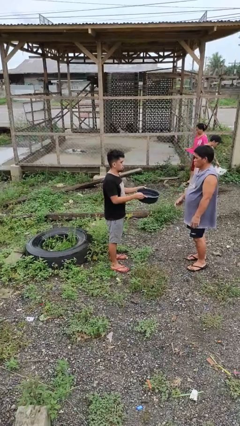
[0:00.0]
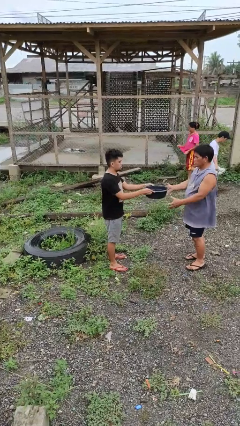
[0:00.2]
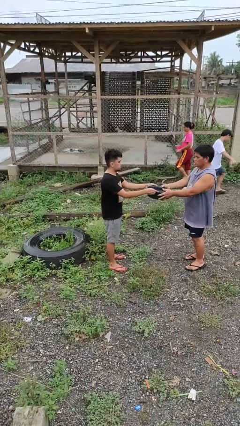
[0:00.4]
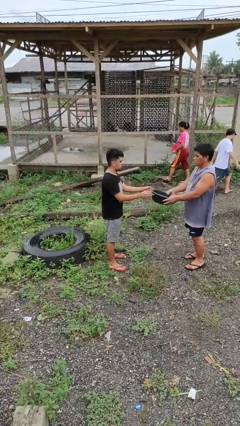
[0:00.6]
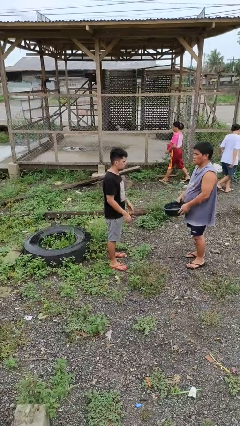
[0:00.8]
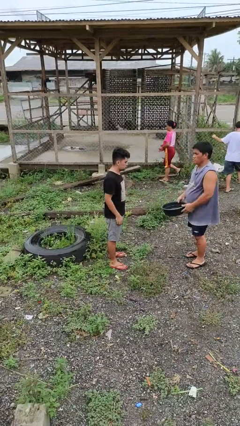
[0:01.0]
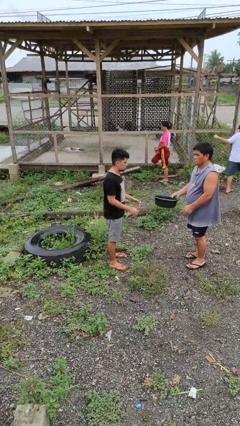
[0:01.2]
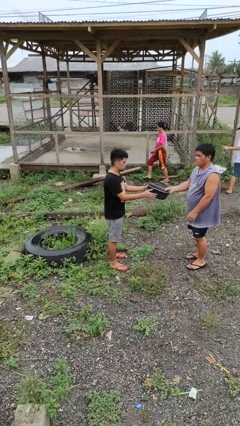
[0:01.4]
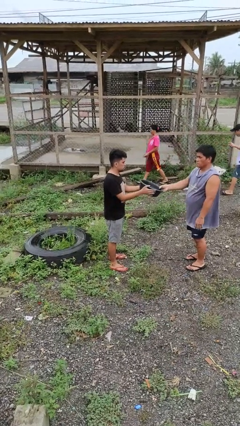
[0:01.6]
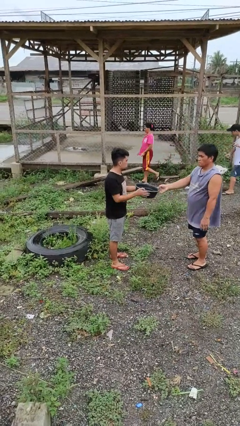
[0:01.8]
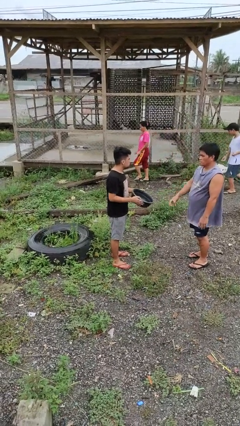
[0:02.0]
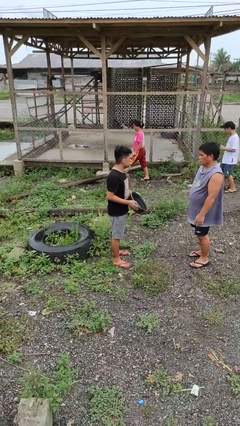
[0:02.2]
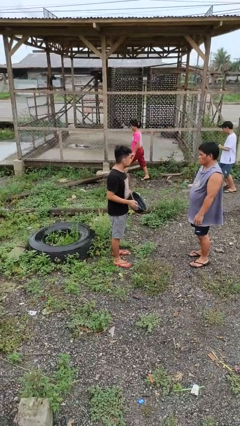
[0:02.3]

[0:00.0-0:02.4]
person transfers object to person

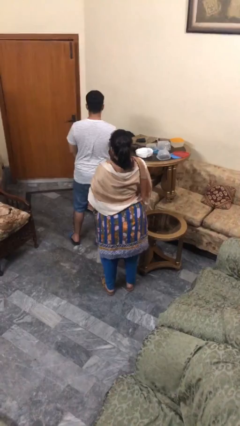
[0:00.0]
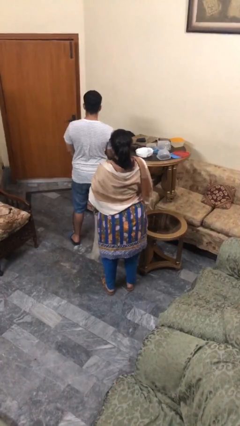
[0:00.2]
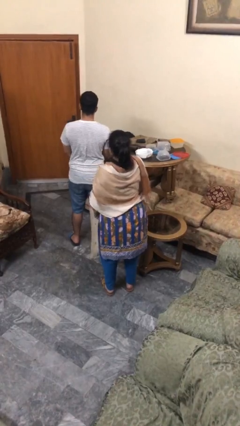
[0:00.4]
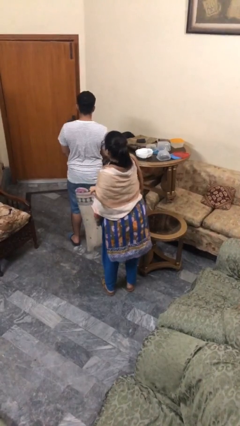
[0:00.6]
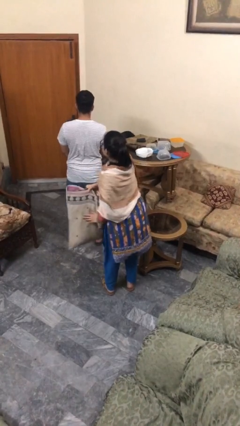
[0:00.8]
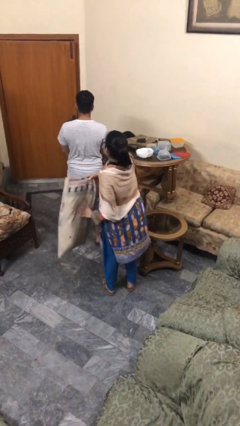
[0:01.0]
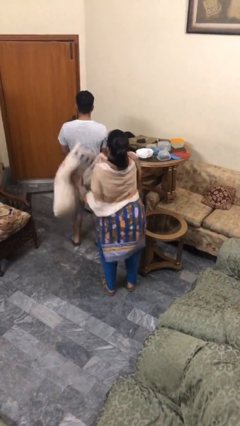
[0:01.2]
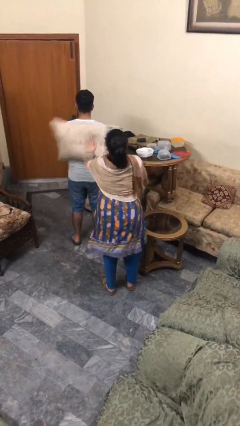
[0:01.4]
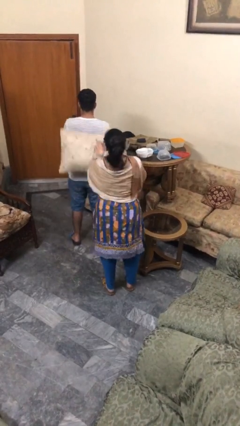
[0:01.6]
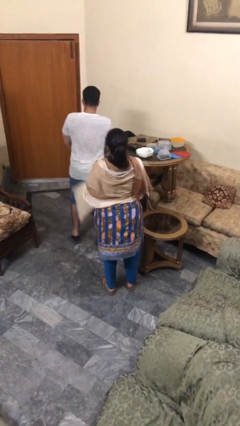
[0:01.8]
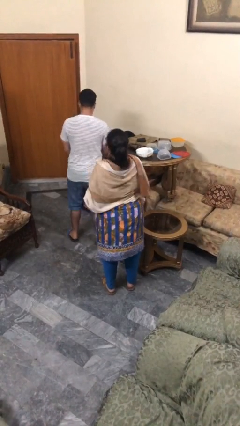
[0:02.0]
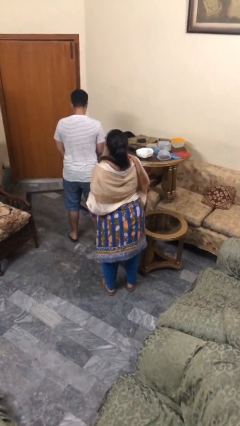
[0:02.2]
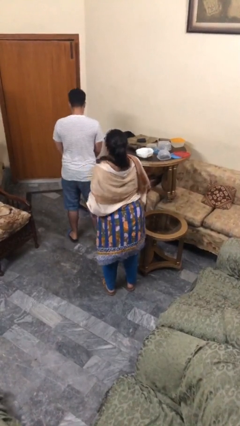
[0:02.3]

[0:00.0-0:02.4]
person hits person with pillow

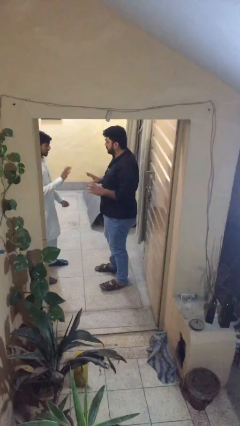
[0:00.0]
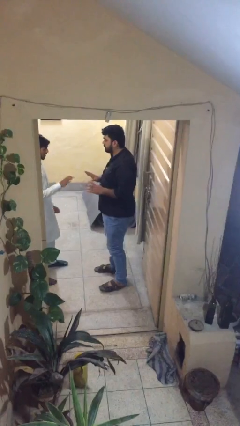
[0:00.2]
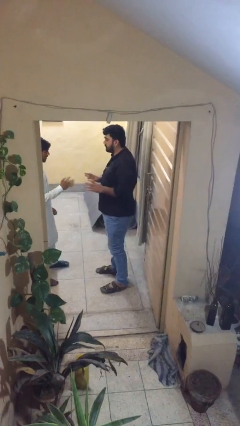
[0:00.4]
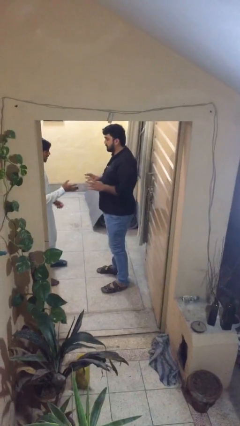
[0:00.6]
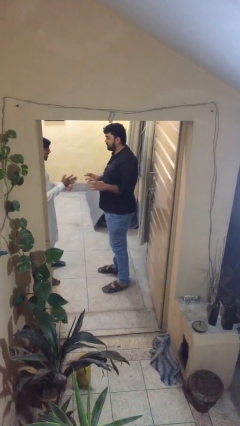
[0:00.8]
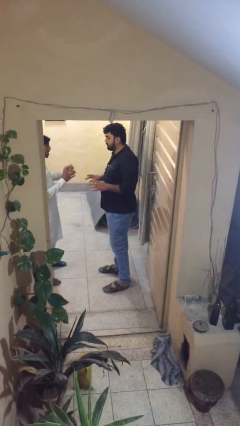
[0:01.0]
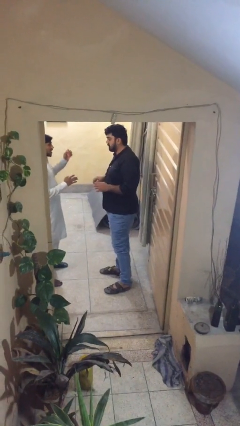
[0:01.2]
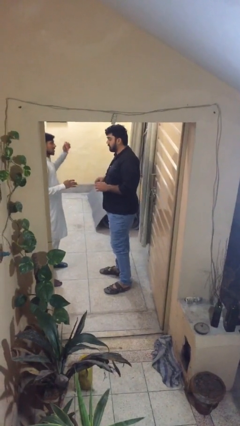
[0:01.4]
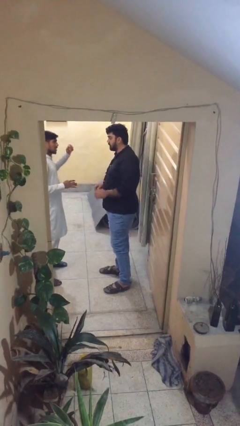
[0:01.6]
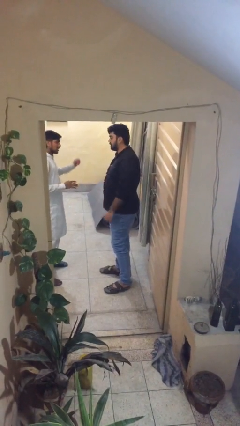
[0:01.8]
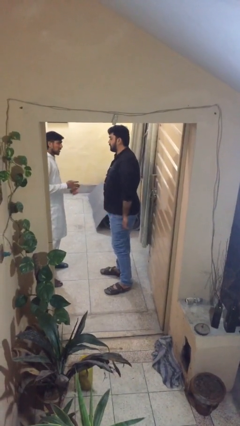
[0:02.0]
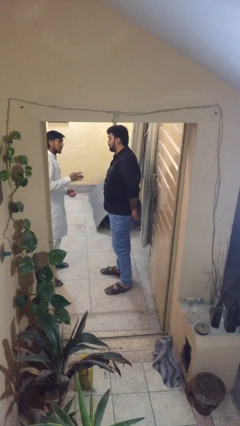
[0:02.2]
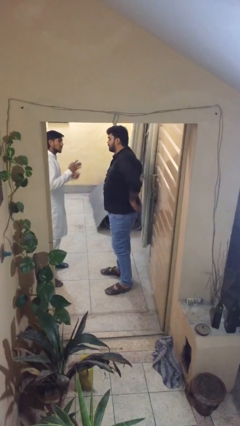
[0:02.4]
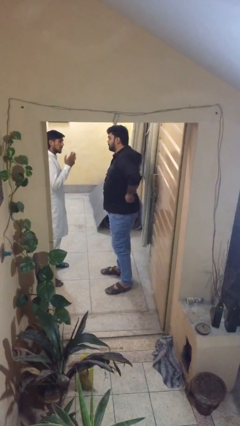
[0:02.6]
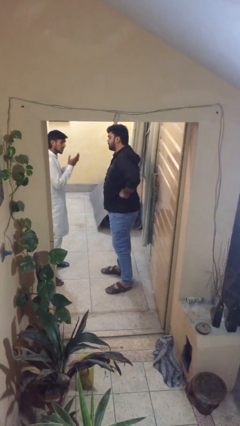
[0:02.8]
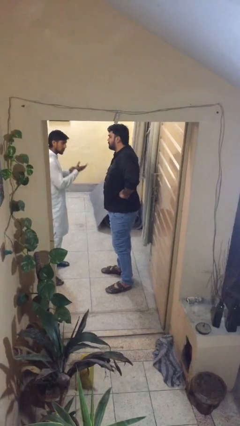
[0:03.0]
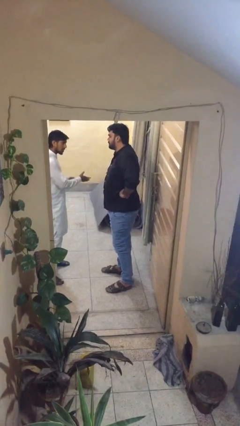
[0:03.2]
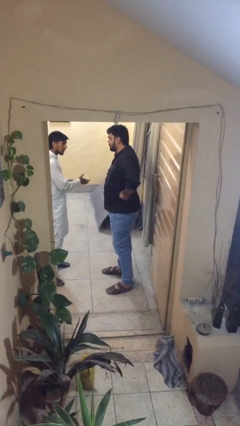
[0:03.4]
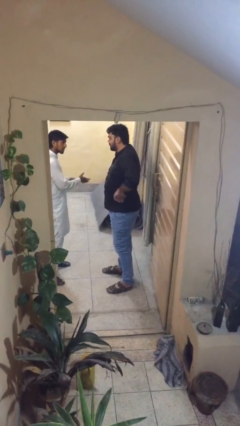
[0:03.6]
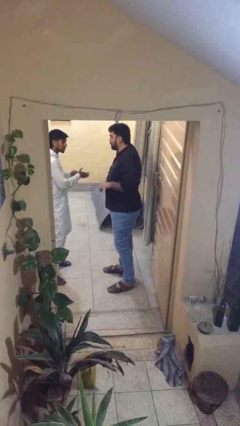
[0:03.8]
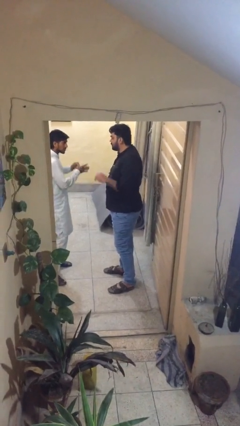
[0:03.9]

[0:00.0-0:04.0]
person talks to person

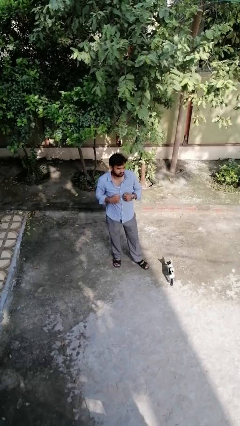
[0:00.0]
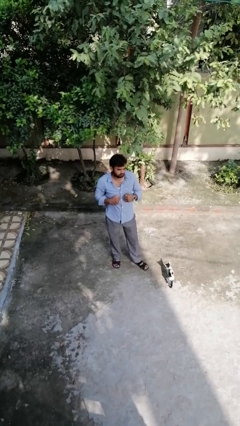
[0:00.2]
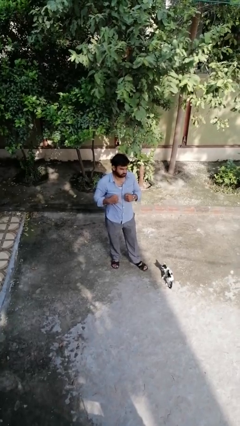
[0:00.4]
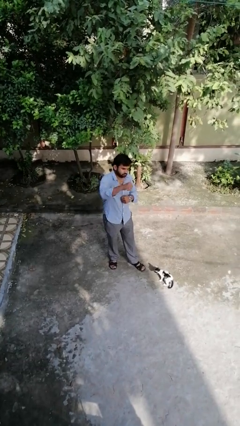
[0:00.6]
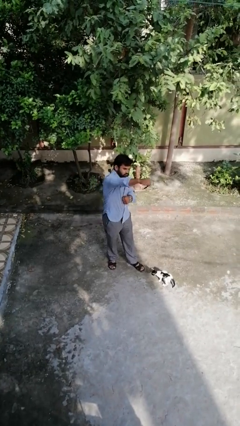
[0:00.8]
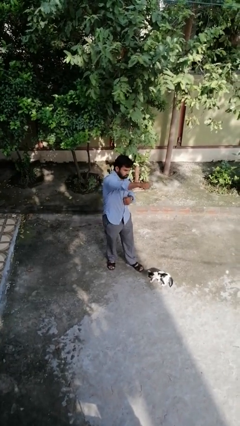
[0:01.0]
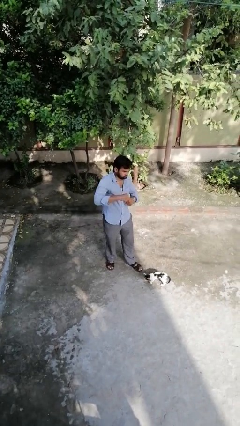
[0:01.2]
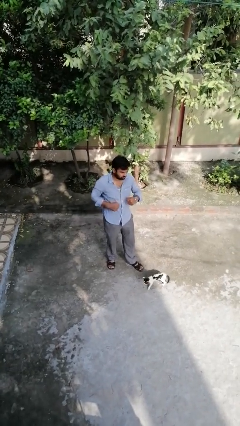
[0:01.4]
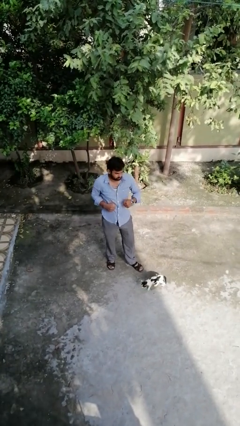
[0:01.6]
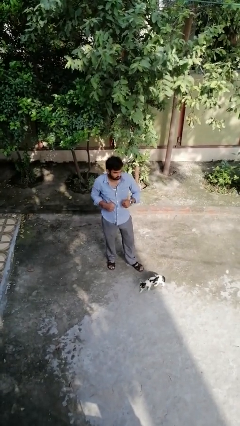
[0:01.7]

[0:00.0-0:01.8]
person punches

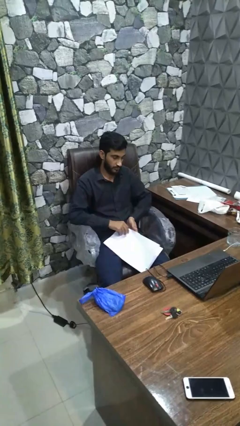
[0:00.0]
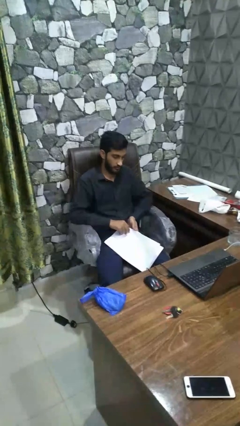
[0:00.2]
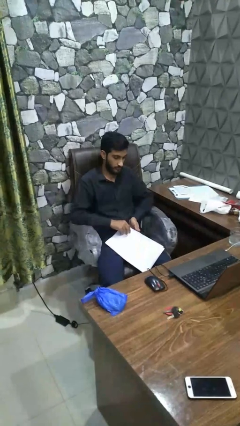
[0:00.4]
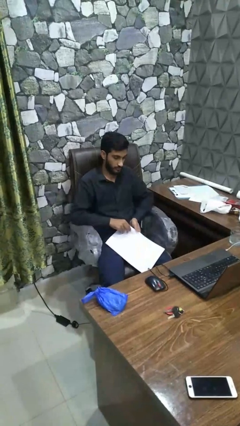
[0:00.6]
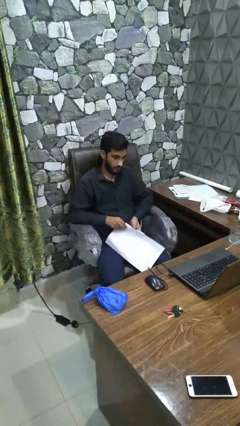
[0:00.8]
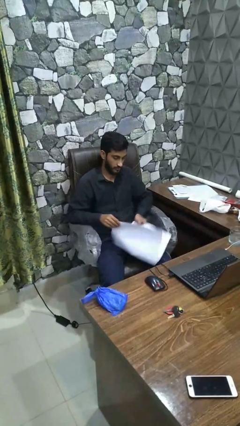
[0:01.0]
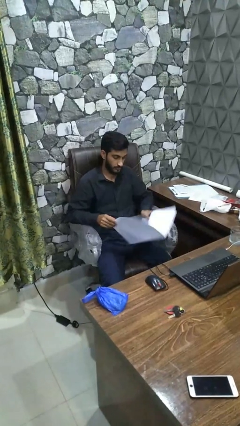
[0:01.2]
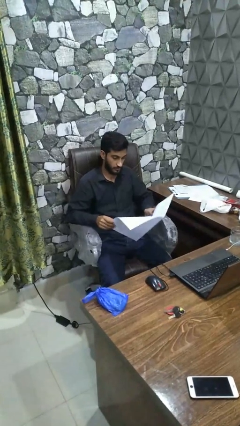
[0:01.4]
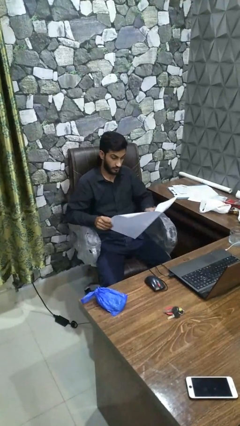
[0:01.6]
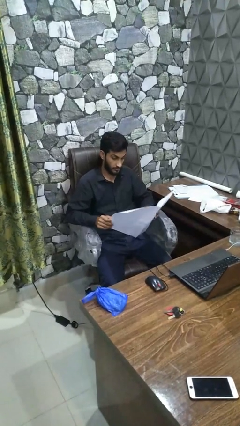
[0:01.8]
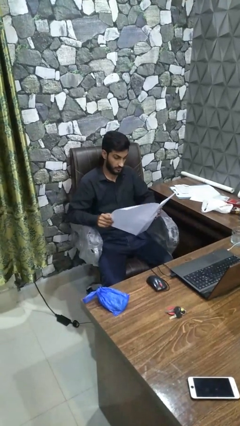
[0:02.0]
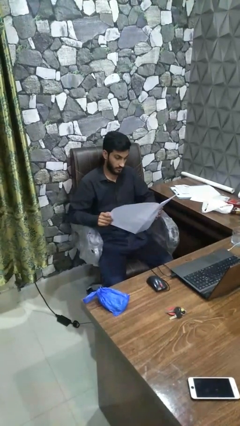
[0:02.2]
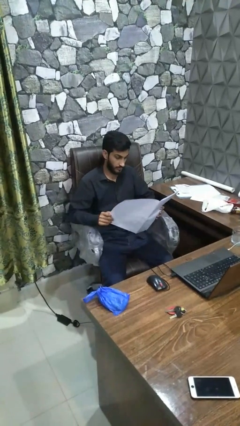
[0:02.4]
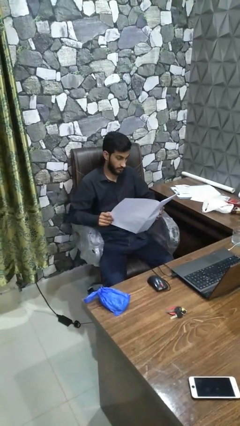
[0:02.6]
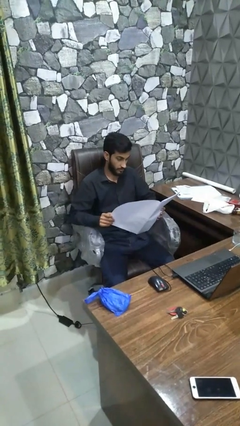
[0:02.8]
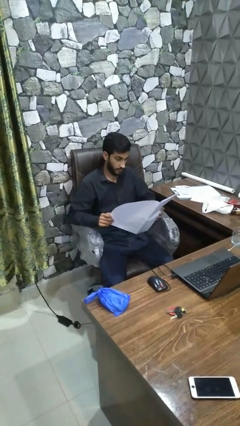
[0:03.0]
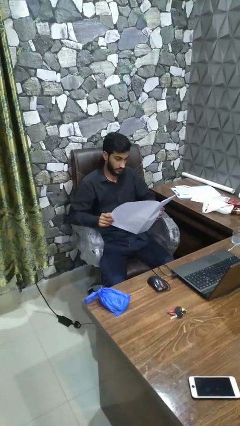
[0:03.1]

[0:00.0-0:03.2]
person reads magazine

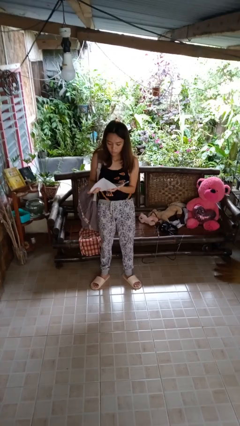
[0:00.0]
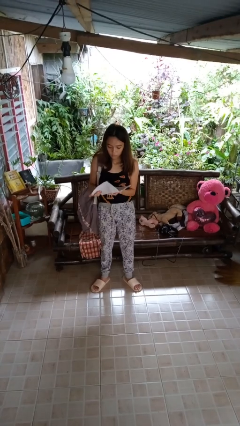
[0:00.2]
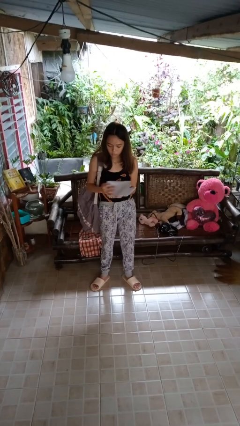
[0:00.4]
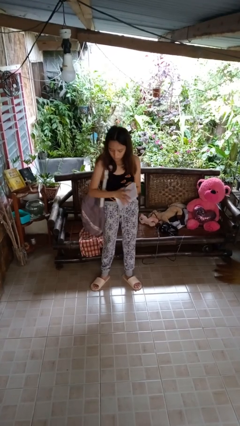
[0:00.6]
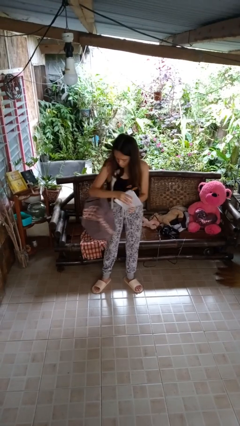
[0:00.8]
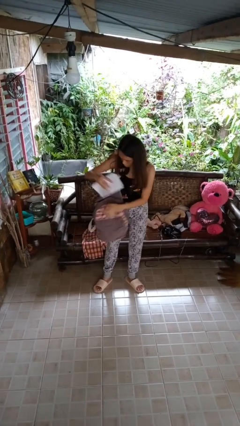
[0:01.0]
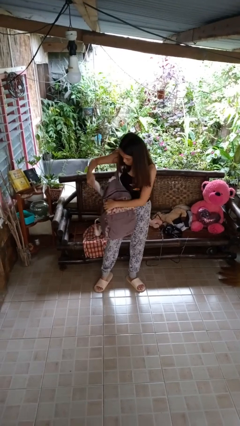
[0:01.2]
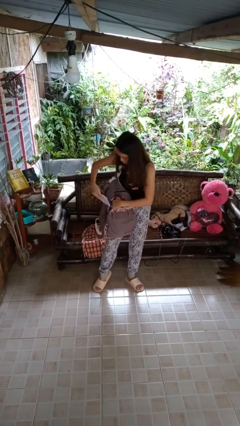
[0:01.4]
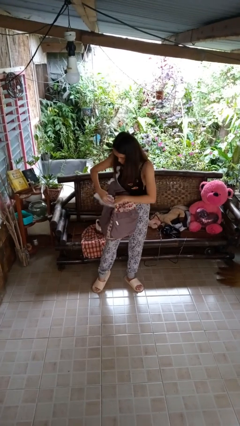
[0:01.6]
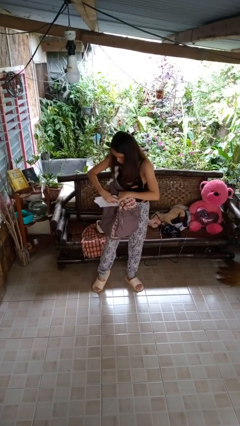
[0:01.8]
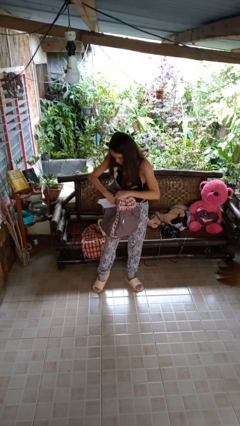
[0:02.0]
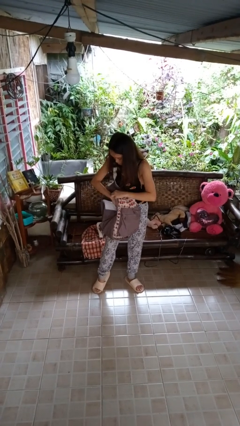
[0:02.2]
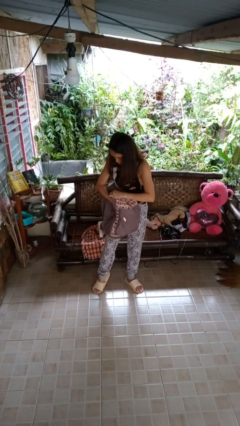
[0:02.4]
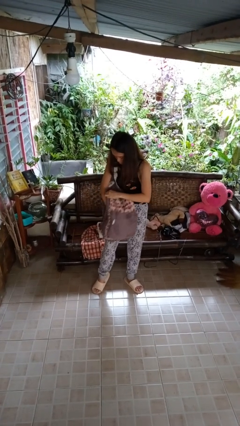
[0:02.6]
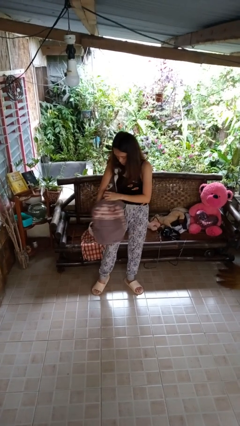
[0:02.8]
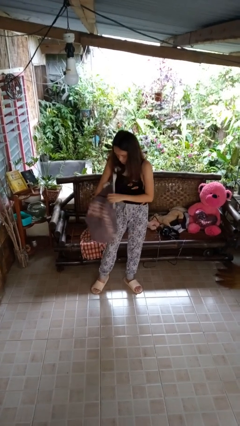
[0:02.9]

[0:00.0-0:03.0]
person puts object into backpack
